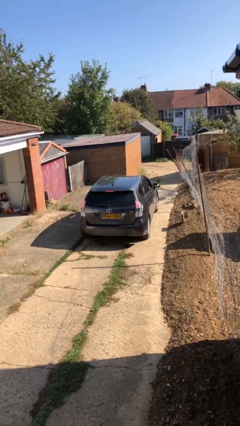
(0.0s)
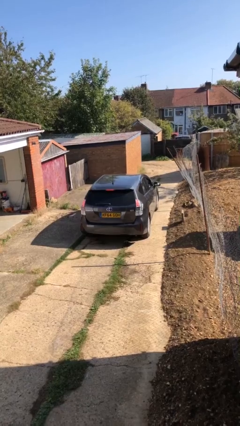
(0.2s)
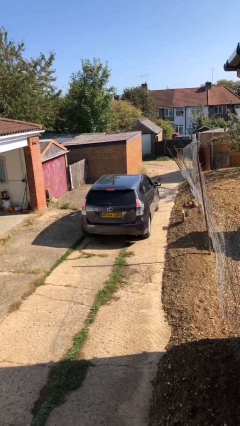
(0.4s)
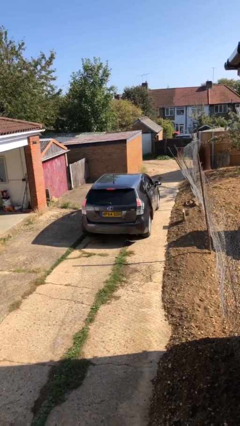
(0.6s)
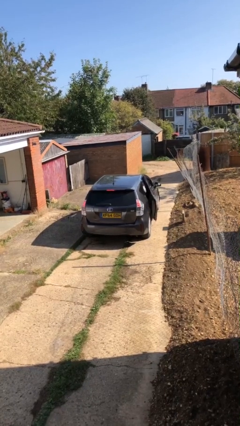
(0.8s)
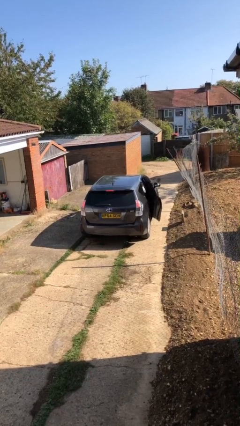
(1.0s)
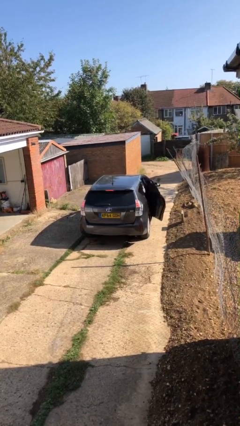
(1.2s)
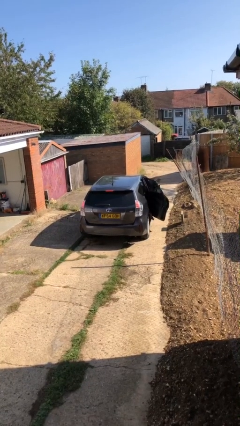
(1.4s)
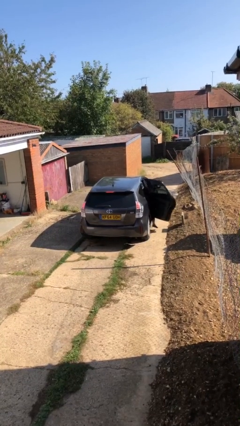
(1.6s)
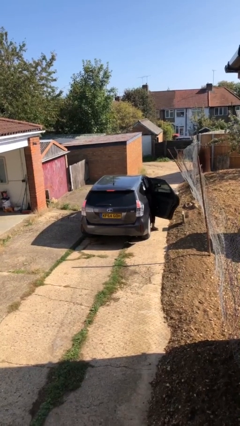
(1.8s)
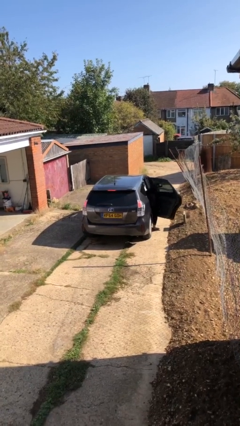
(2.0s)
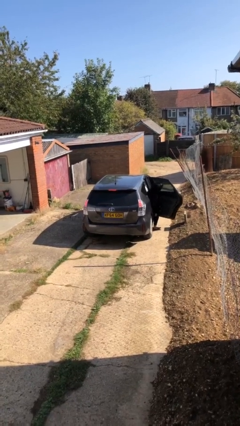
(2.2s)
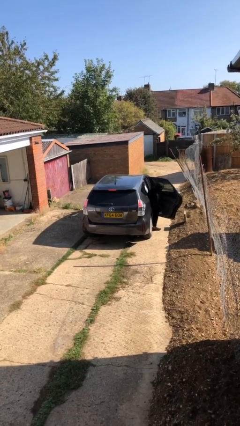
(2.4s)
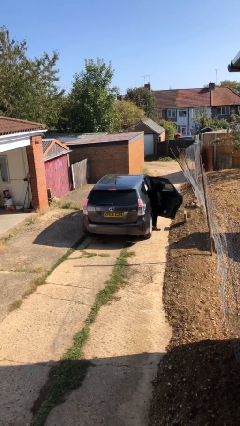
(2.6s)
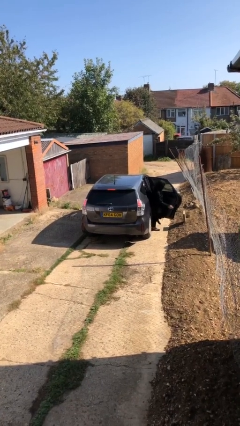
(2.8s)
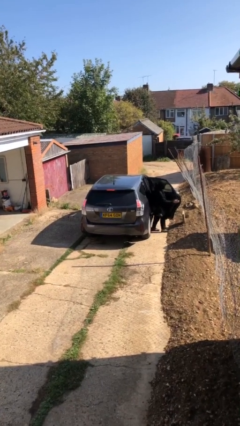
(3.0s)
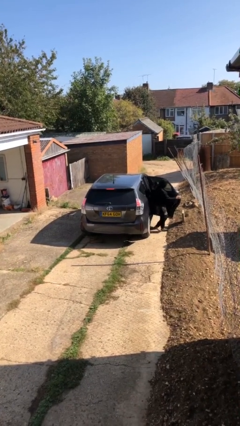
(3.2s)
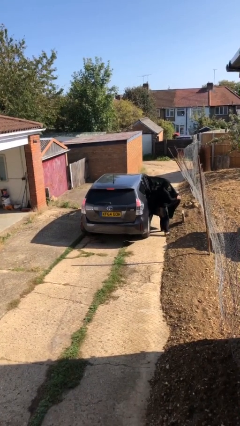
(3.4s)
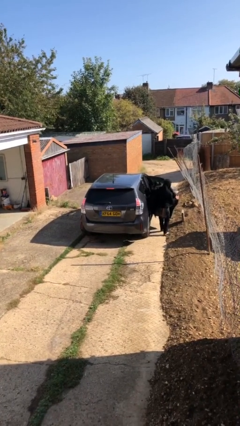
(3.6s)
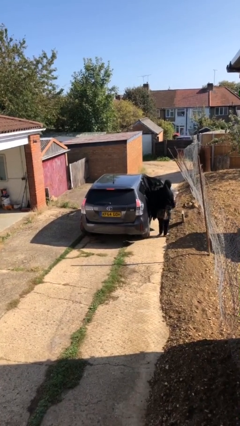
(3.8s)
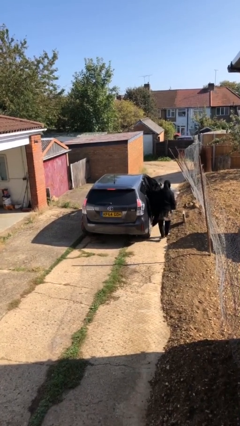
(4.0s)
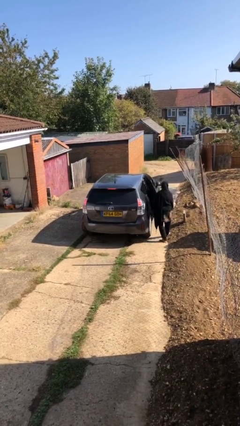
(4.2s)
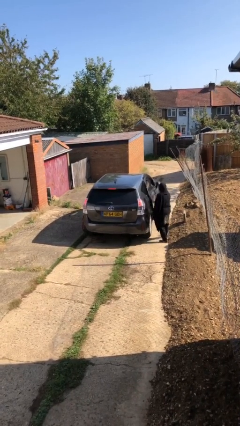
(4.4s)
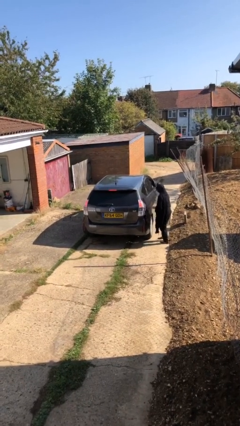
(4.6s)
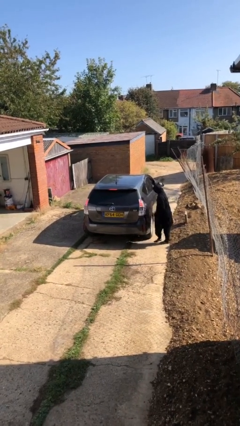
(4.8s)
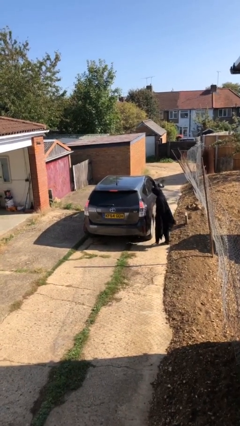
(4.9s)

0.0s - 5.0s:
car drops off person

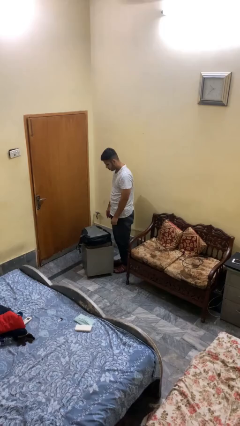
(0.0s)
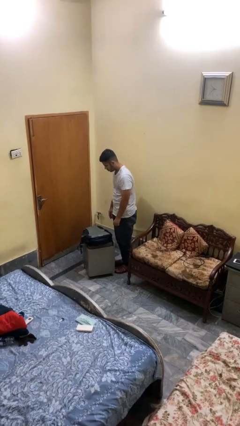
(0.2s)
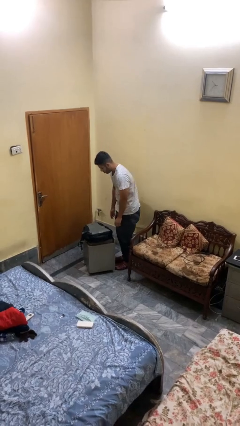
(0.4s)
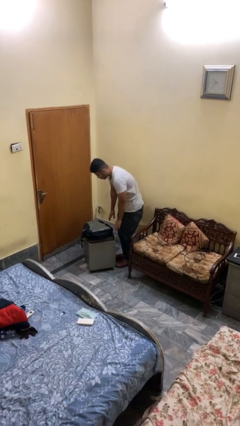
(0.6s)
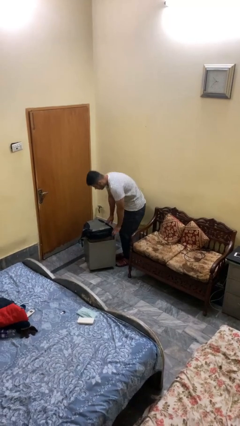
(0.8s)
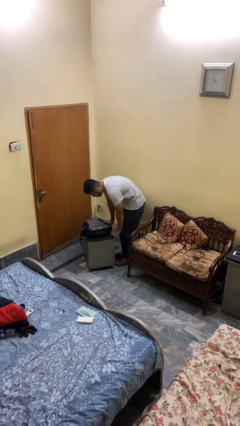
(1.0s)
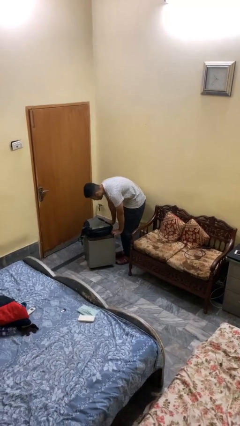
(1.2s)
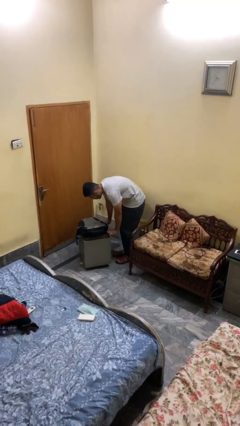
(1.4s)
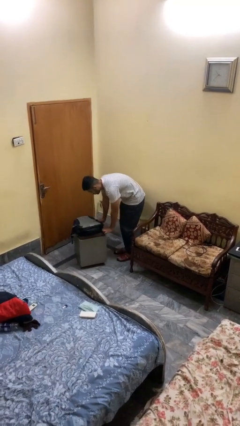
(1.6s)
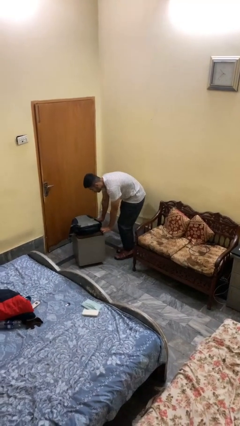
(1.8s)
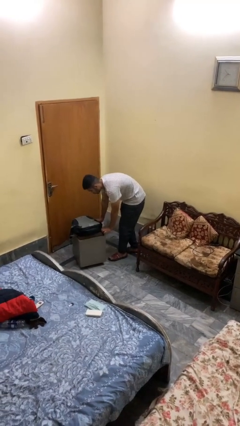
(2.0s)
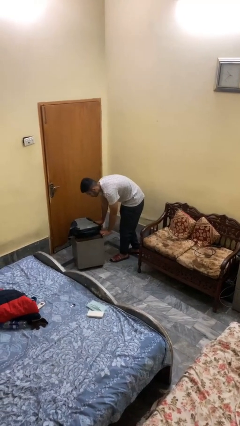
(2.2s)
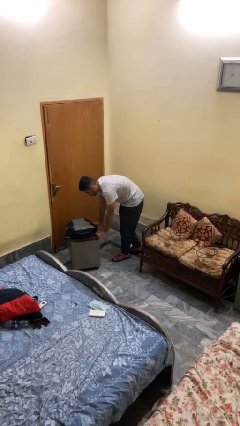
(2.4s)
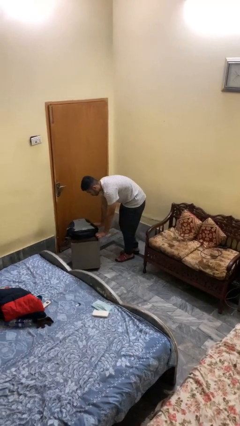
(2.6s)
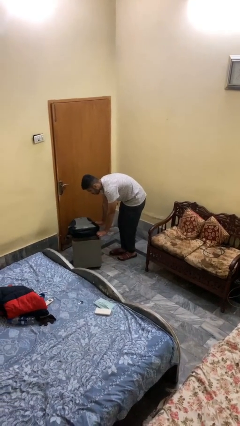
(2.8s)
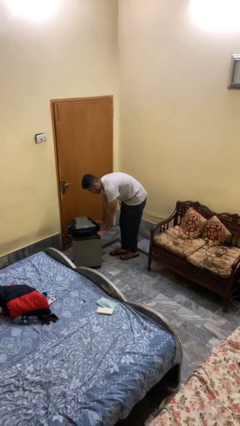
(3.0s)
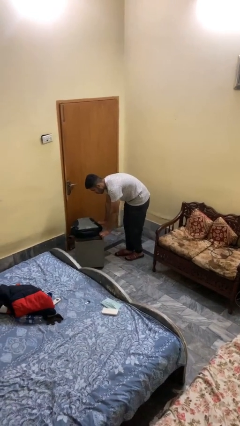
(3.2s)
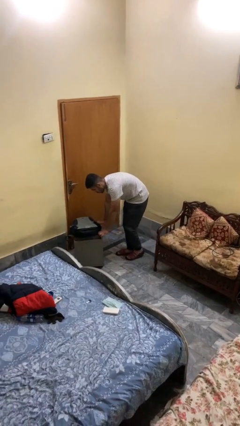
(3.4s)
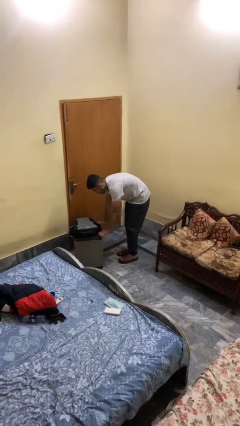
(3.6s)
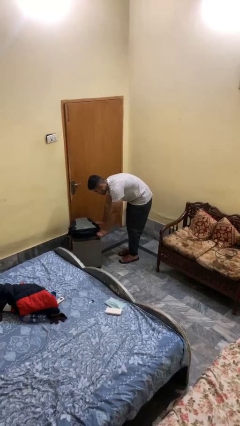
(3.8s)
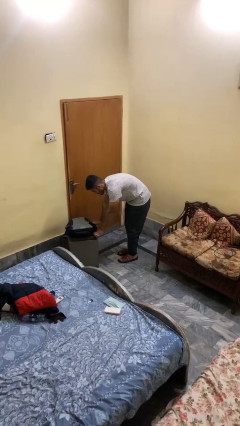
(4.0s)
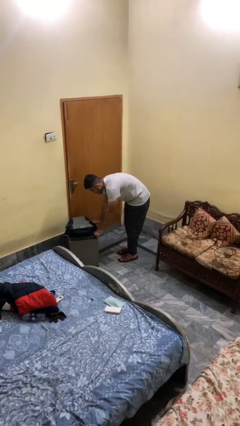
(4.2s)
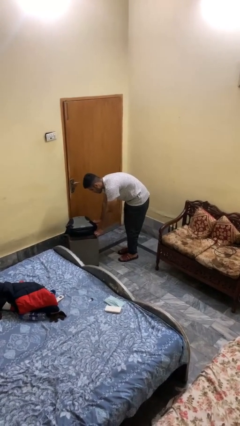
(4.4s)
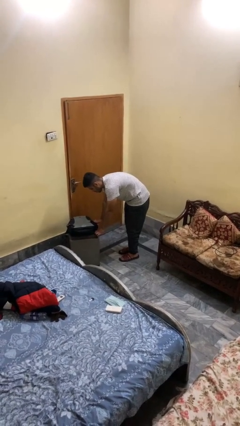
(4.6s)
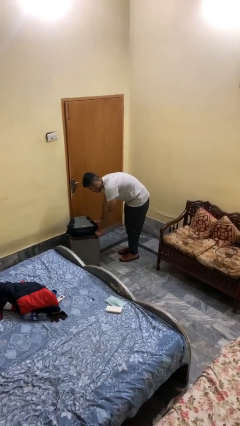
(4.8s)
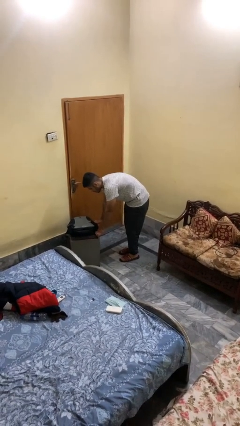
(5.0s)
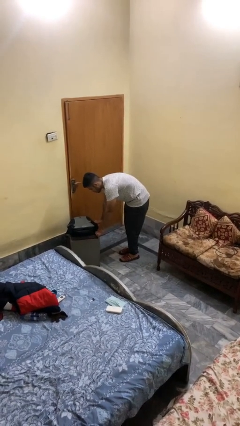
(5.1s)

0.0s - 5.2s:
person pushes wheeled cart

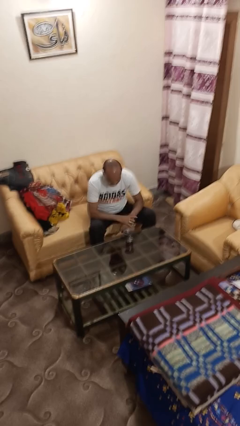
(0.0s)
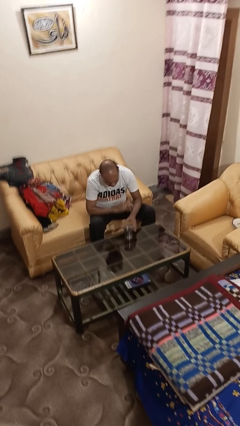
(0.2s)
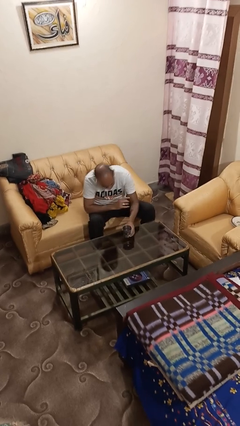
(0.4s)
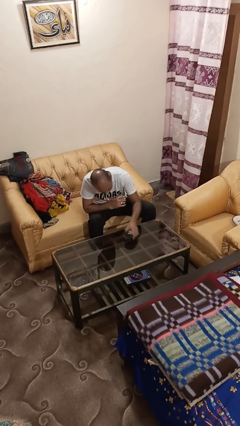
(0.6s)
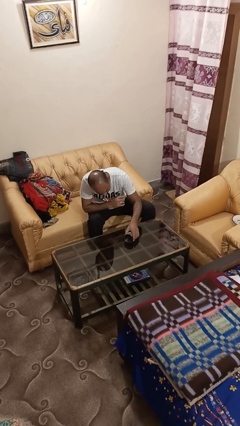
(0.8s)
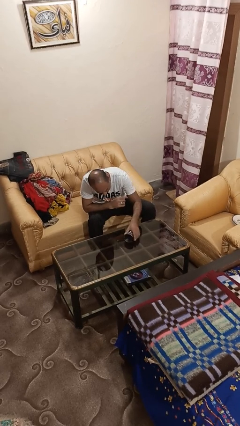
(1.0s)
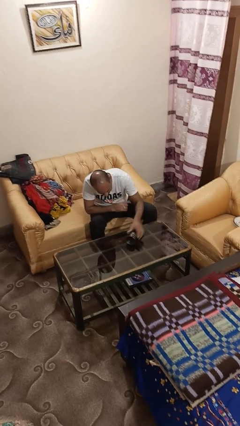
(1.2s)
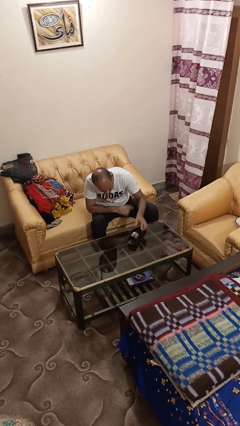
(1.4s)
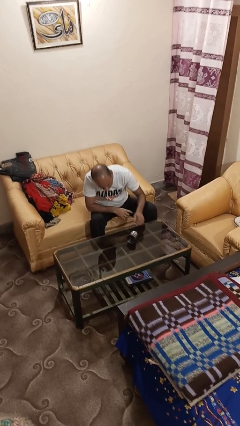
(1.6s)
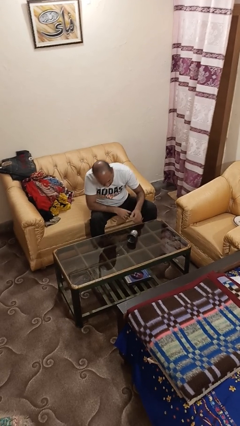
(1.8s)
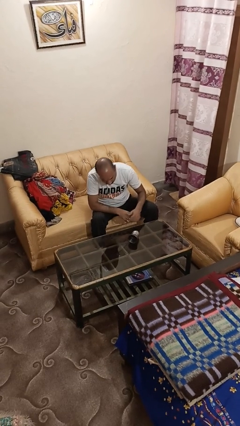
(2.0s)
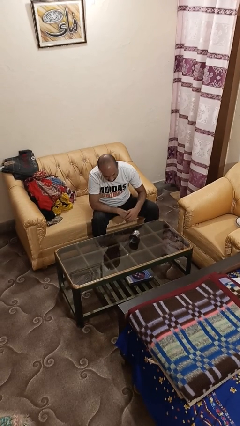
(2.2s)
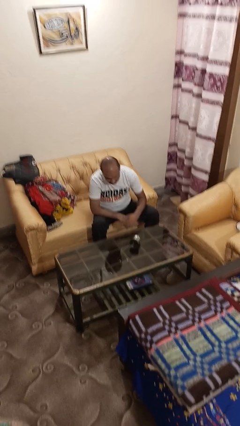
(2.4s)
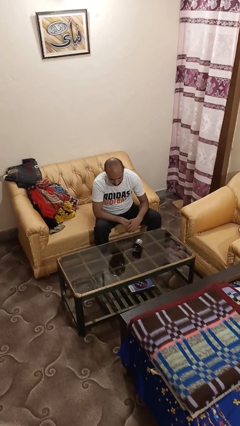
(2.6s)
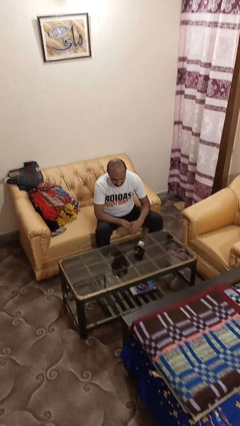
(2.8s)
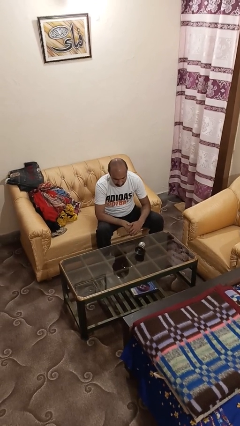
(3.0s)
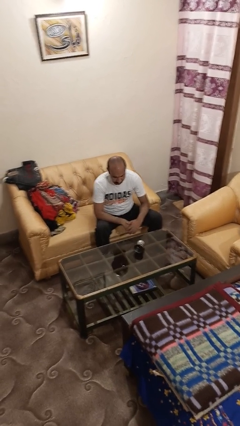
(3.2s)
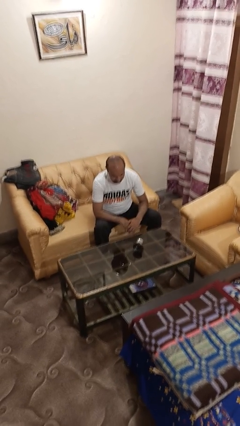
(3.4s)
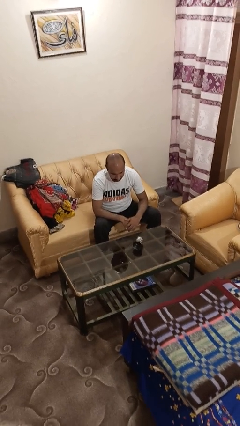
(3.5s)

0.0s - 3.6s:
person spills on table

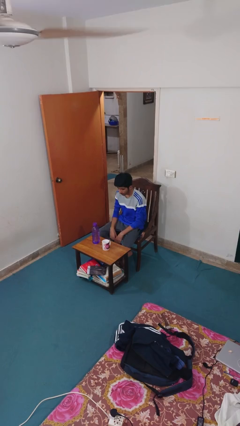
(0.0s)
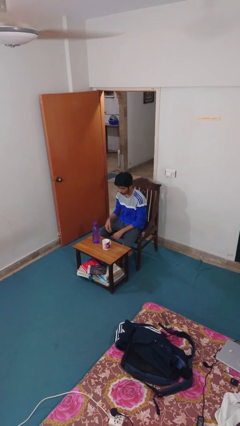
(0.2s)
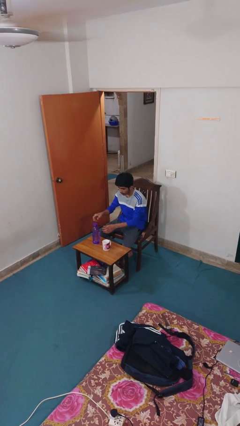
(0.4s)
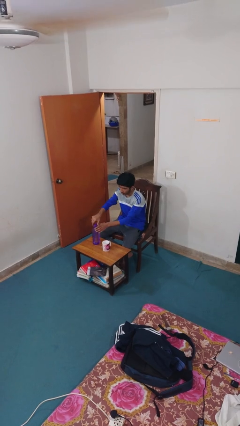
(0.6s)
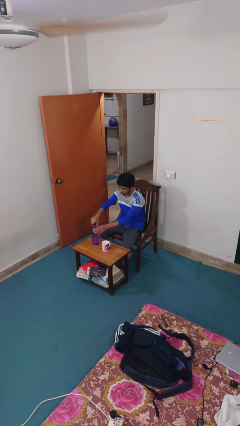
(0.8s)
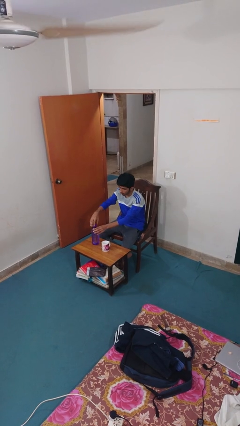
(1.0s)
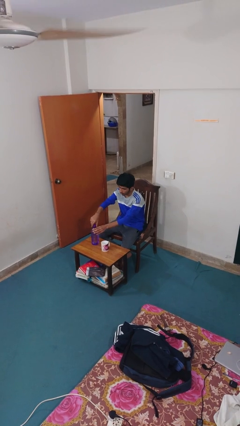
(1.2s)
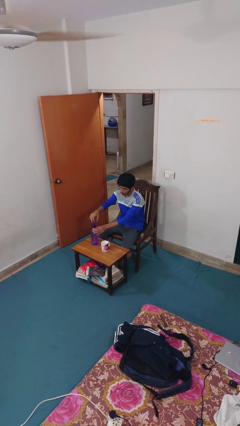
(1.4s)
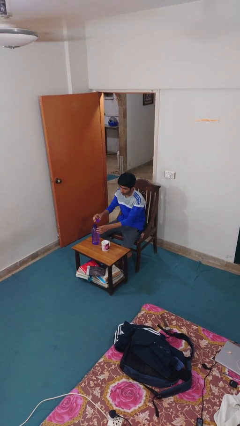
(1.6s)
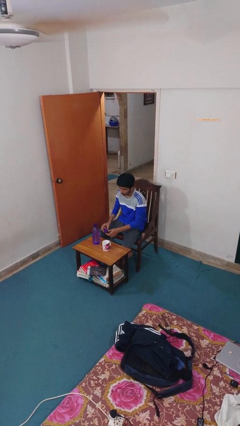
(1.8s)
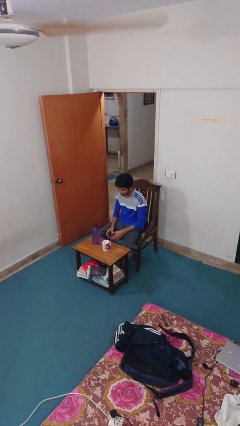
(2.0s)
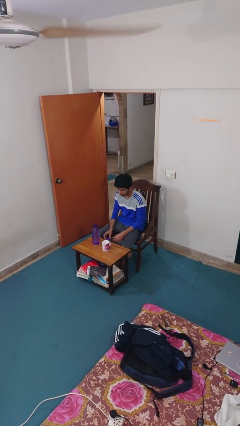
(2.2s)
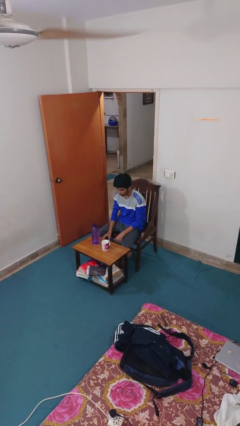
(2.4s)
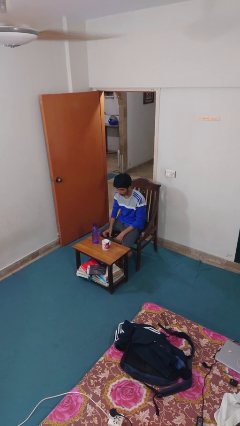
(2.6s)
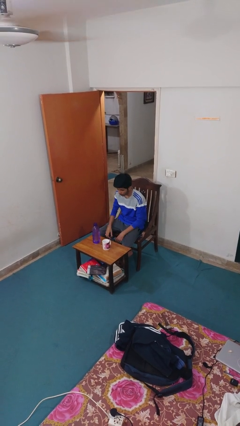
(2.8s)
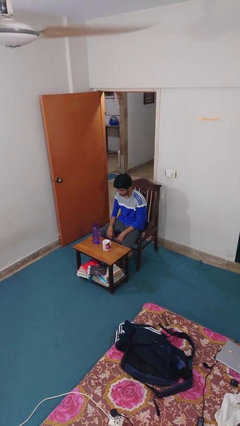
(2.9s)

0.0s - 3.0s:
person unscrews lid from bottle

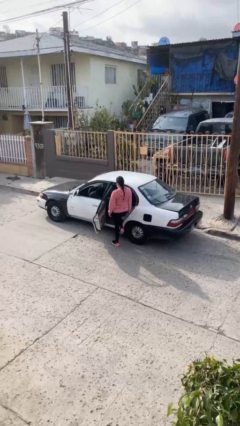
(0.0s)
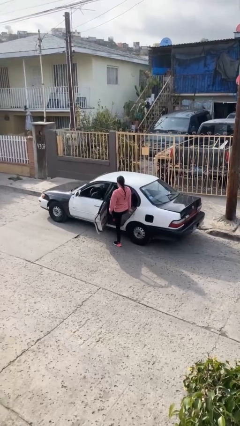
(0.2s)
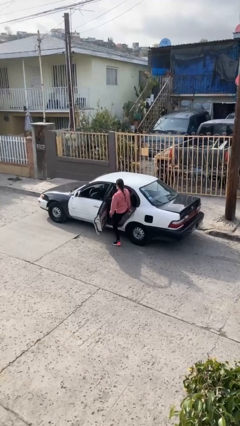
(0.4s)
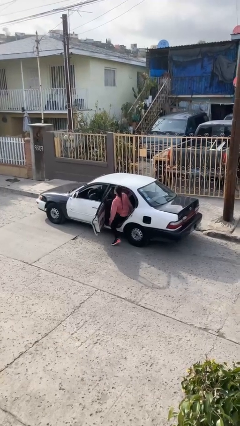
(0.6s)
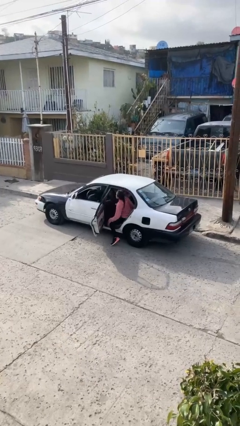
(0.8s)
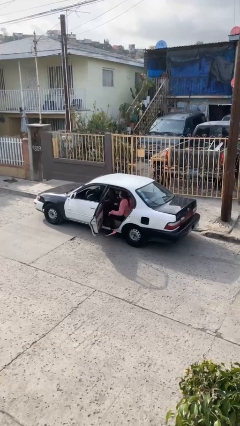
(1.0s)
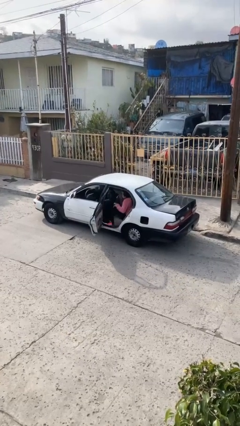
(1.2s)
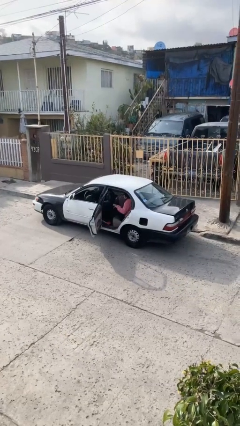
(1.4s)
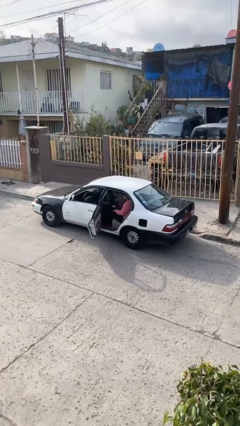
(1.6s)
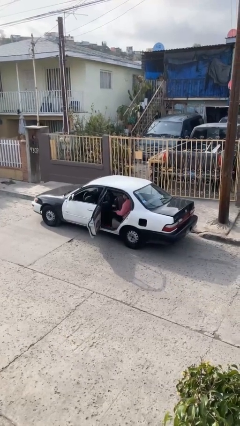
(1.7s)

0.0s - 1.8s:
person enters car
